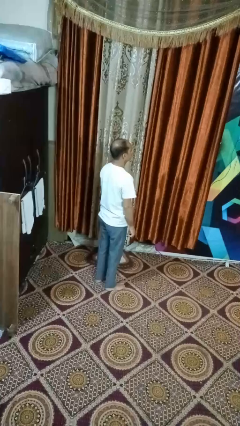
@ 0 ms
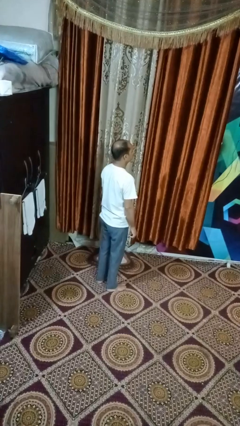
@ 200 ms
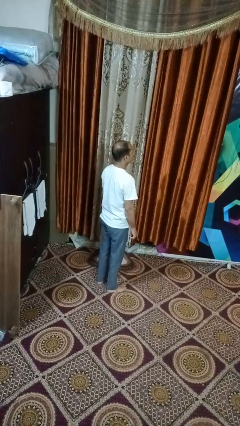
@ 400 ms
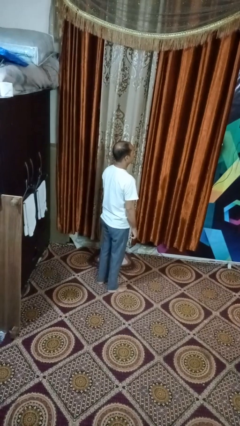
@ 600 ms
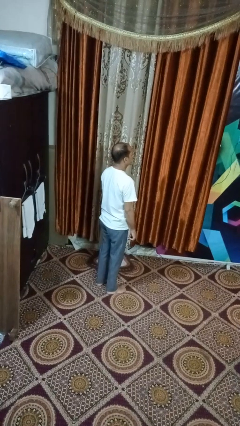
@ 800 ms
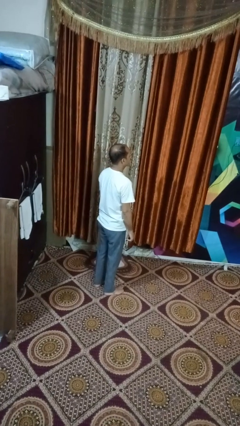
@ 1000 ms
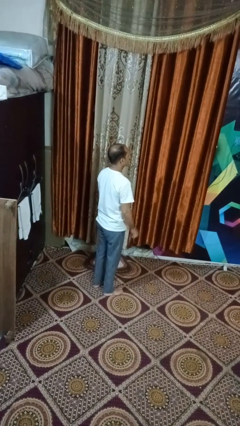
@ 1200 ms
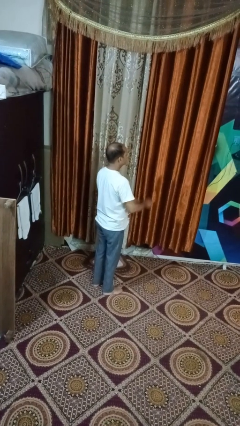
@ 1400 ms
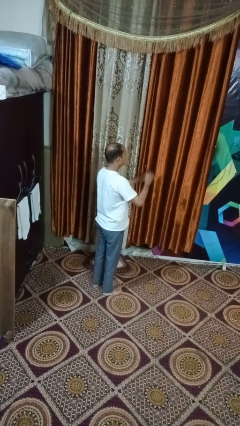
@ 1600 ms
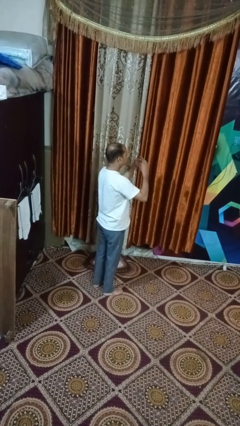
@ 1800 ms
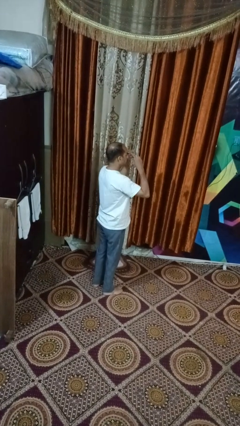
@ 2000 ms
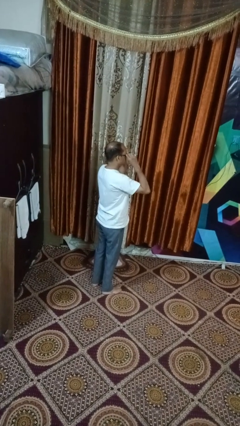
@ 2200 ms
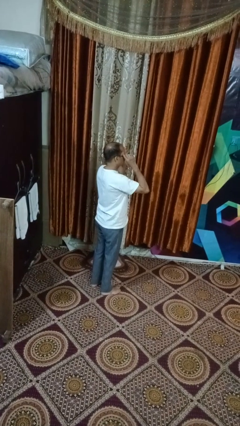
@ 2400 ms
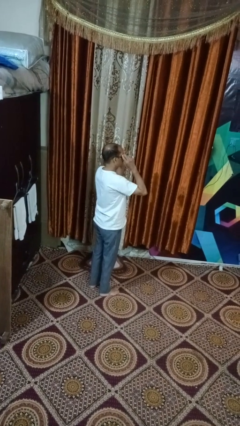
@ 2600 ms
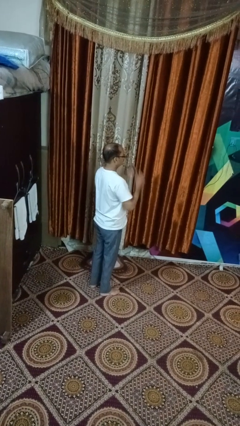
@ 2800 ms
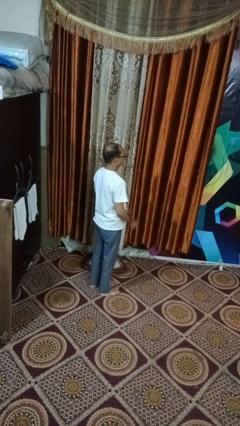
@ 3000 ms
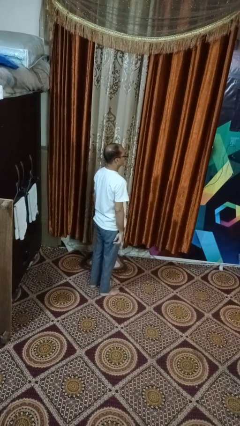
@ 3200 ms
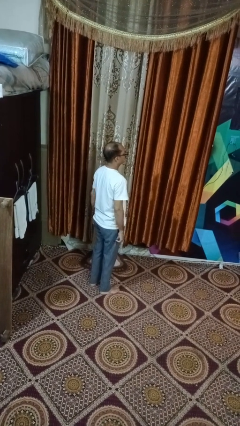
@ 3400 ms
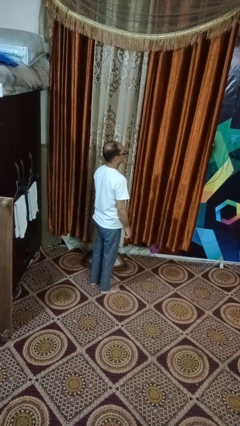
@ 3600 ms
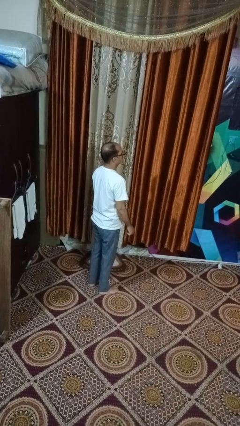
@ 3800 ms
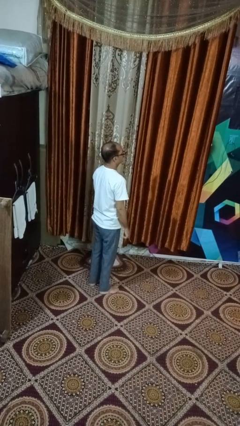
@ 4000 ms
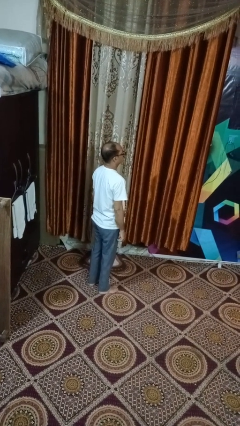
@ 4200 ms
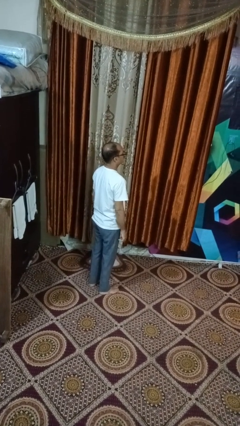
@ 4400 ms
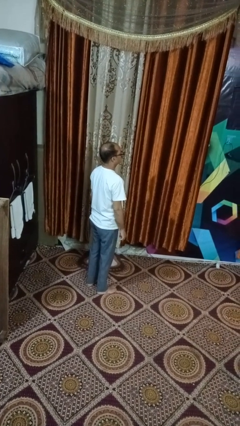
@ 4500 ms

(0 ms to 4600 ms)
person puts on glasses

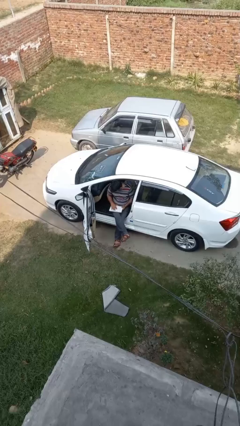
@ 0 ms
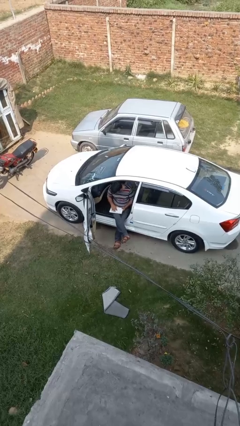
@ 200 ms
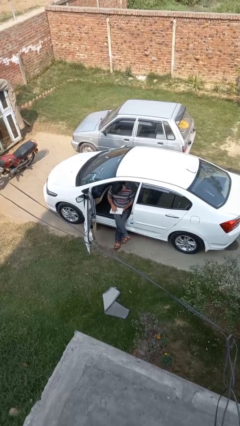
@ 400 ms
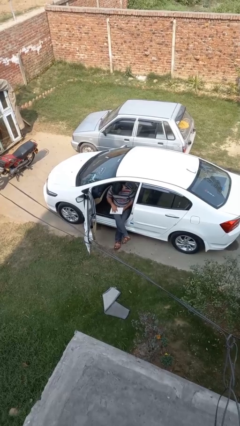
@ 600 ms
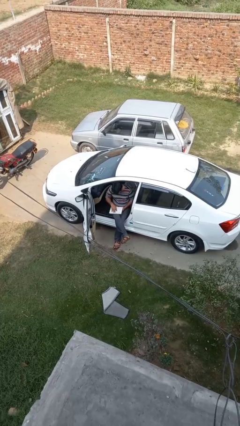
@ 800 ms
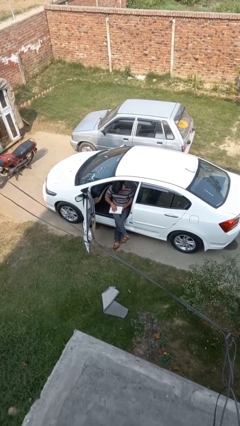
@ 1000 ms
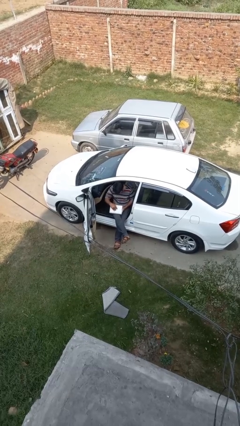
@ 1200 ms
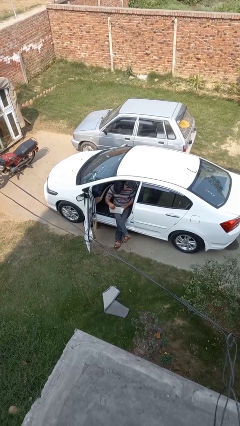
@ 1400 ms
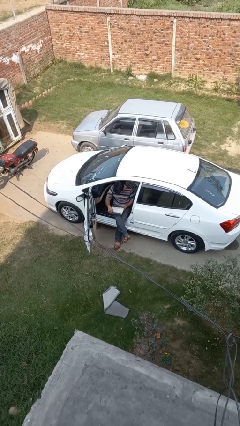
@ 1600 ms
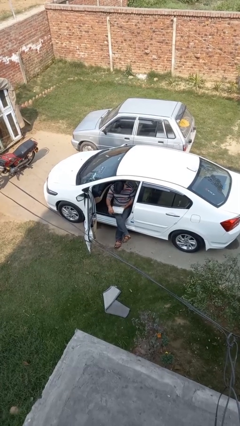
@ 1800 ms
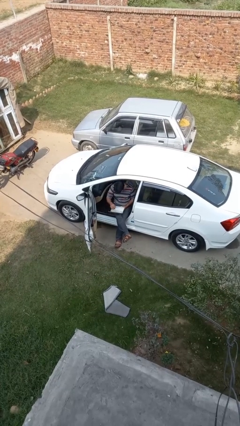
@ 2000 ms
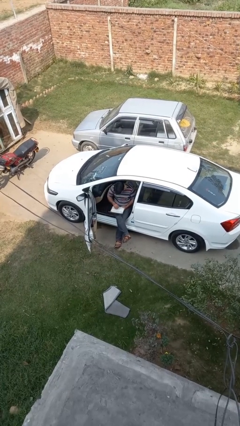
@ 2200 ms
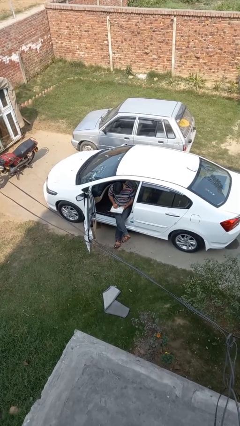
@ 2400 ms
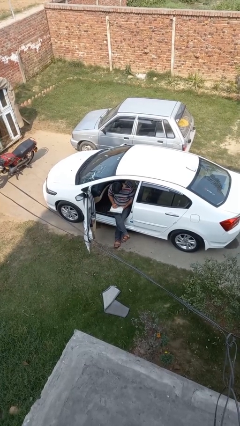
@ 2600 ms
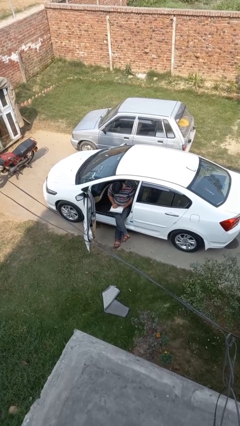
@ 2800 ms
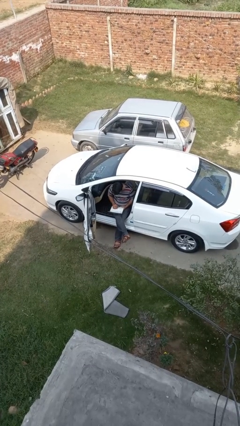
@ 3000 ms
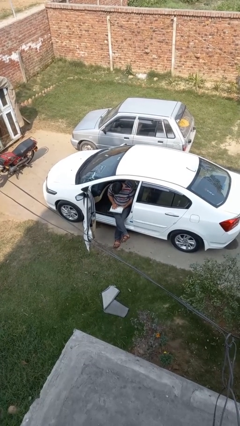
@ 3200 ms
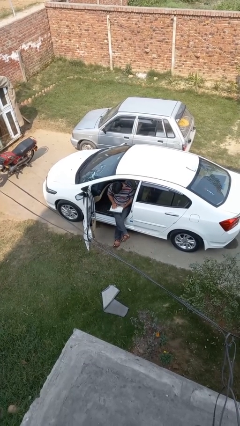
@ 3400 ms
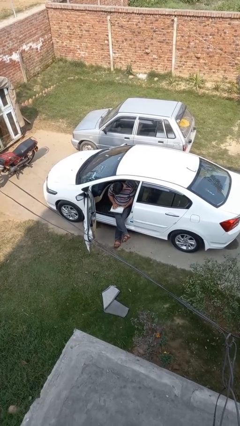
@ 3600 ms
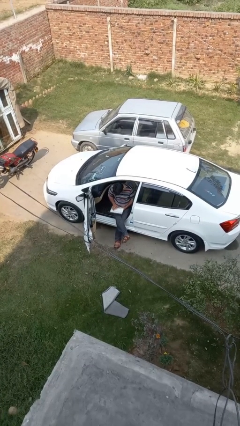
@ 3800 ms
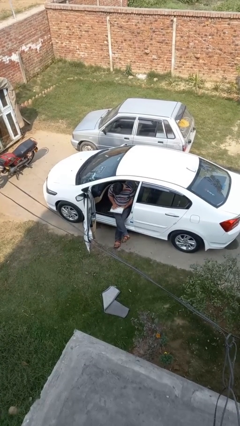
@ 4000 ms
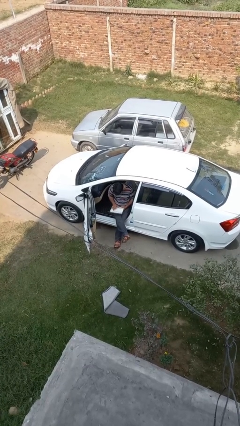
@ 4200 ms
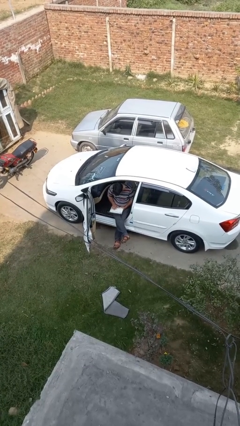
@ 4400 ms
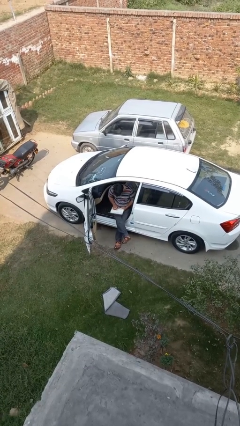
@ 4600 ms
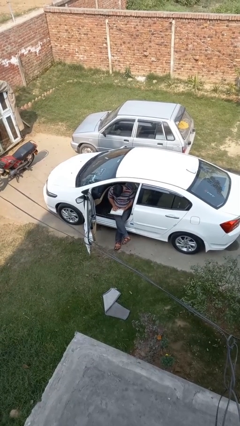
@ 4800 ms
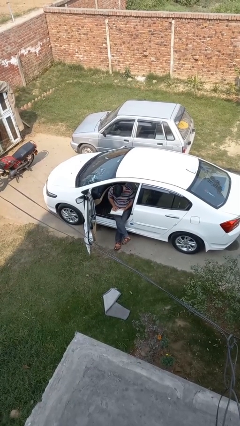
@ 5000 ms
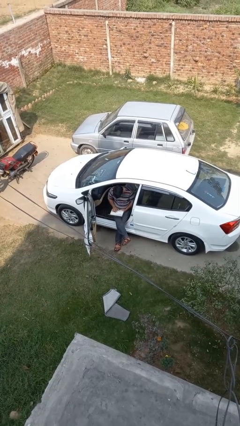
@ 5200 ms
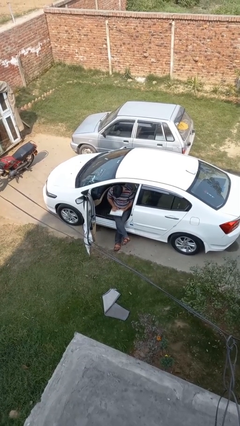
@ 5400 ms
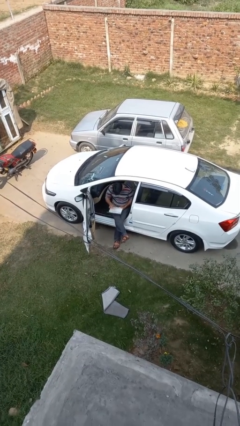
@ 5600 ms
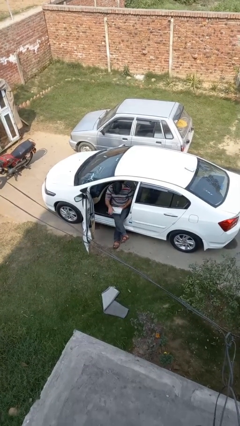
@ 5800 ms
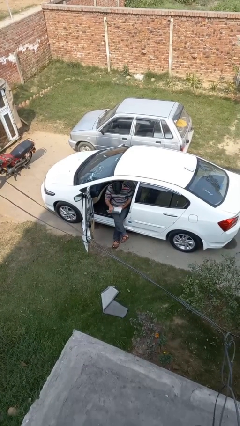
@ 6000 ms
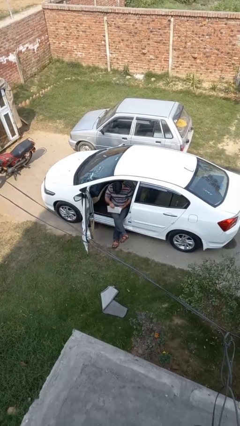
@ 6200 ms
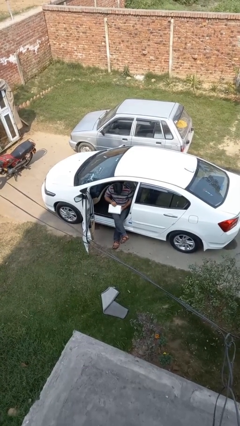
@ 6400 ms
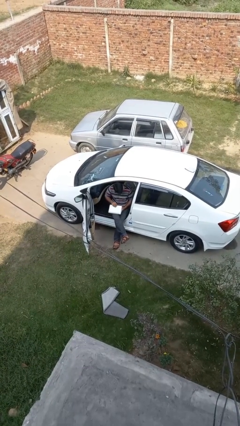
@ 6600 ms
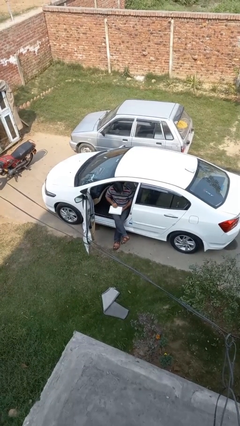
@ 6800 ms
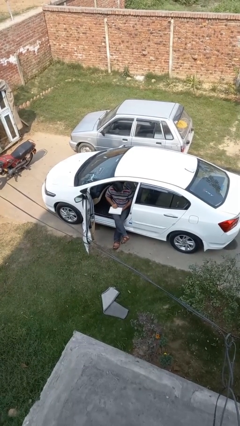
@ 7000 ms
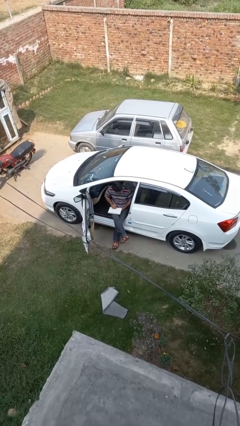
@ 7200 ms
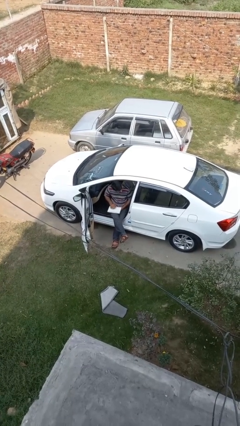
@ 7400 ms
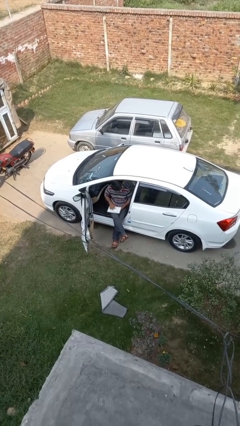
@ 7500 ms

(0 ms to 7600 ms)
person interacts with laptop

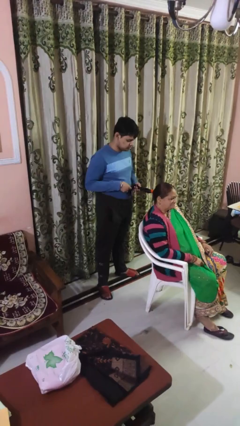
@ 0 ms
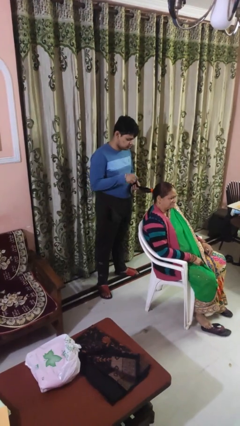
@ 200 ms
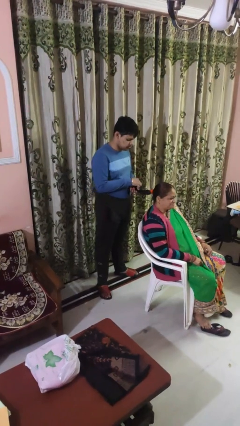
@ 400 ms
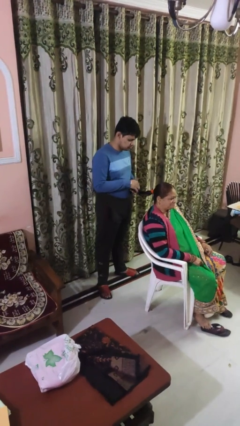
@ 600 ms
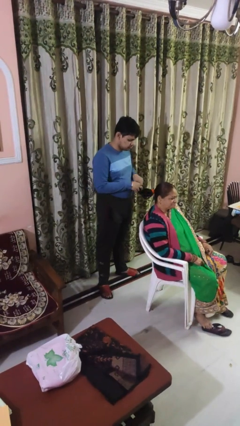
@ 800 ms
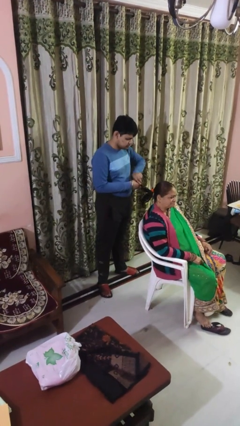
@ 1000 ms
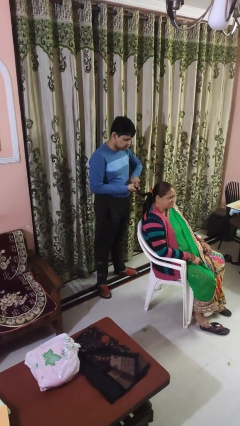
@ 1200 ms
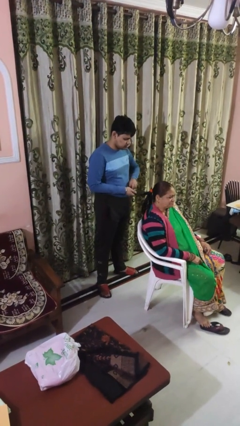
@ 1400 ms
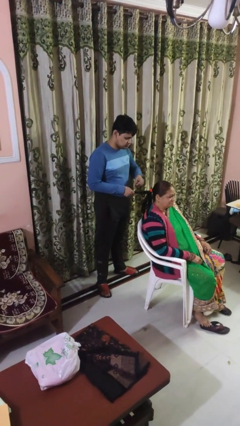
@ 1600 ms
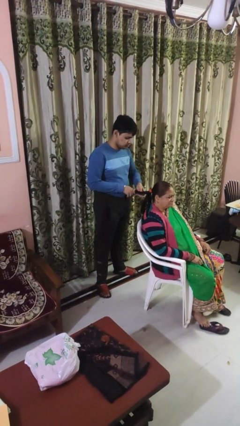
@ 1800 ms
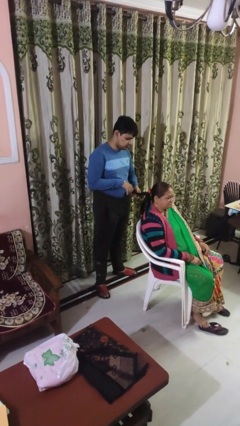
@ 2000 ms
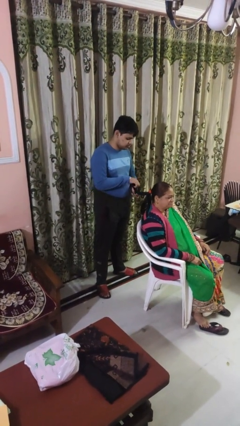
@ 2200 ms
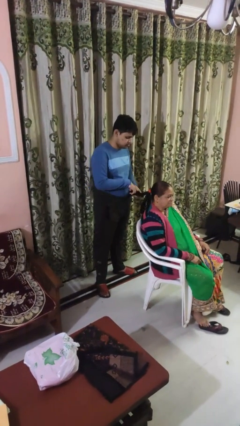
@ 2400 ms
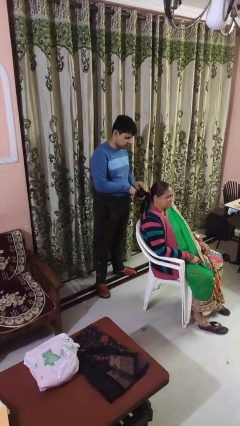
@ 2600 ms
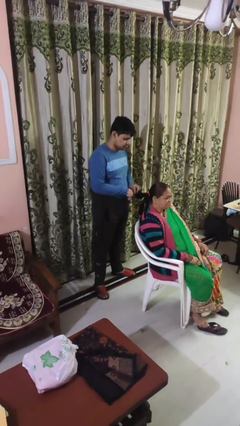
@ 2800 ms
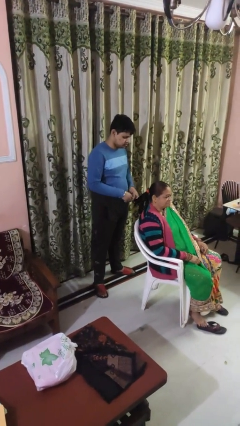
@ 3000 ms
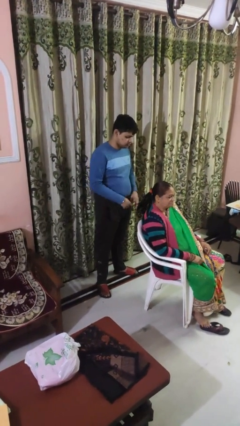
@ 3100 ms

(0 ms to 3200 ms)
person braids hair of person

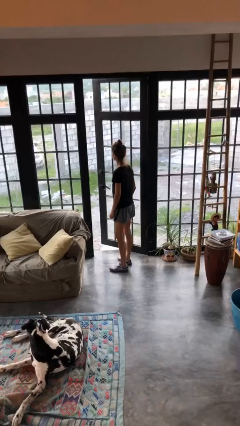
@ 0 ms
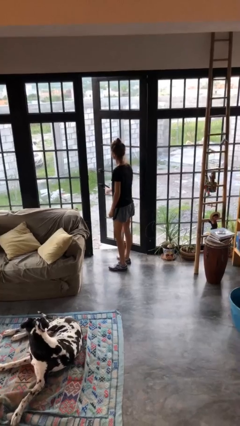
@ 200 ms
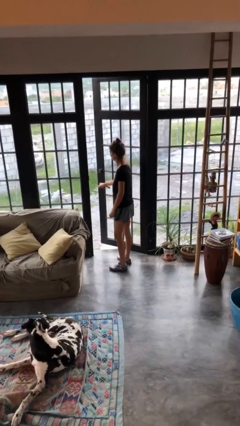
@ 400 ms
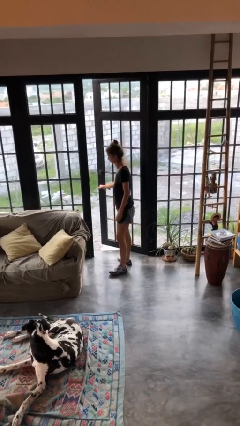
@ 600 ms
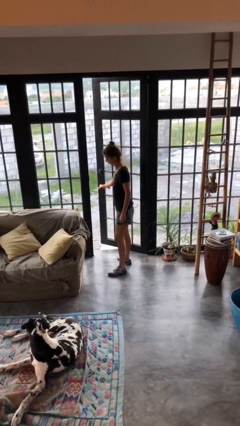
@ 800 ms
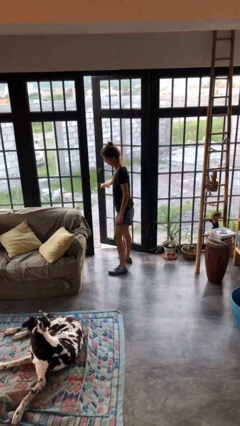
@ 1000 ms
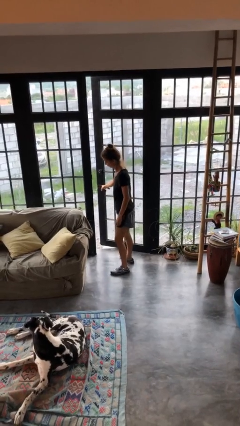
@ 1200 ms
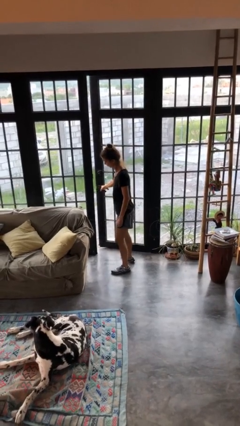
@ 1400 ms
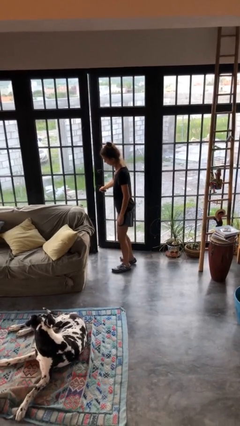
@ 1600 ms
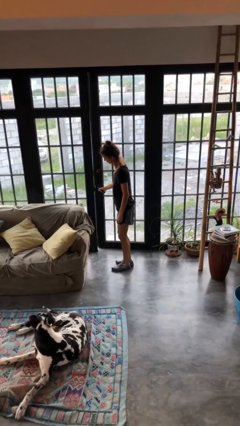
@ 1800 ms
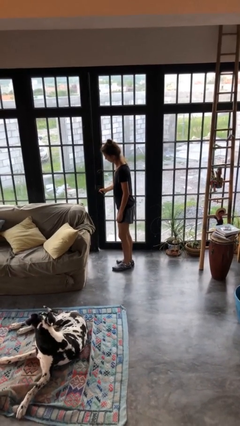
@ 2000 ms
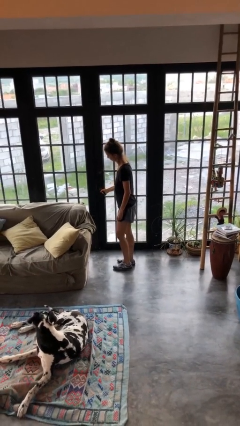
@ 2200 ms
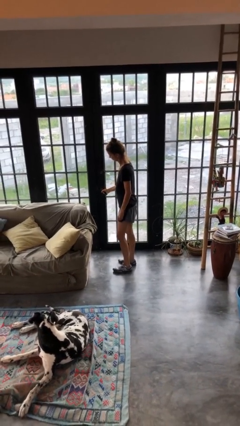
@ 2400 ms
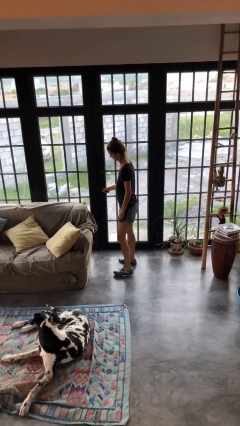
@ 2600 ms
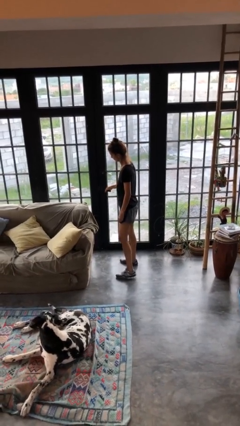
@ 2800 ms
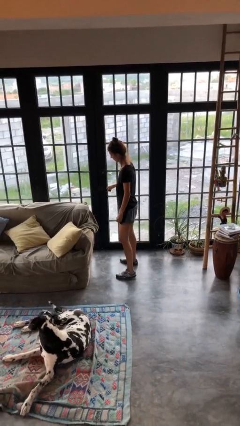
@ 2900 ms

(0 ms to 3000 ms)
person closes facility door
